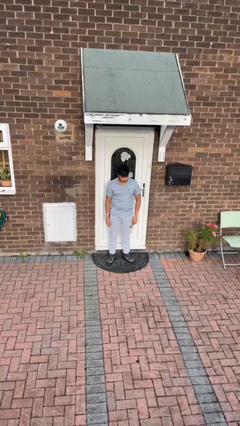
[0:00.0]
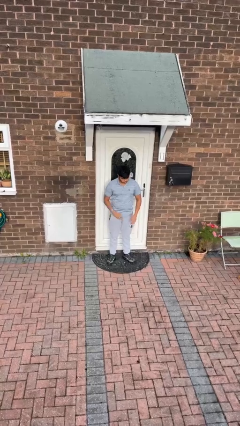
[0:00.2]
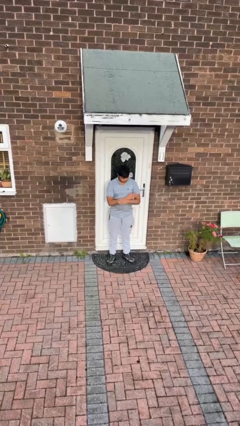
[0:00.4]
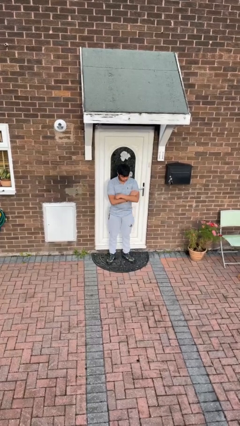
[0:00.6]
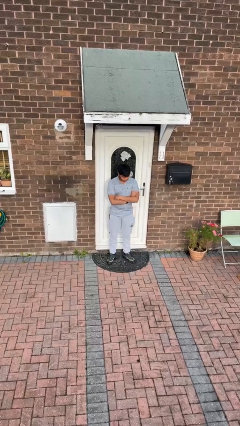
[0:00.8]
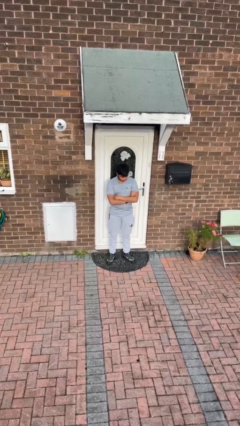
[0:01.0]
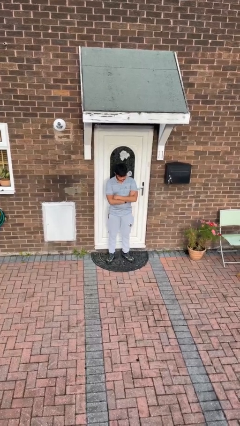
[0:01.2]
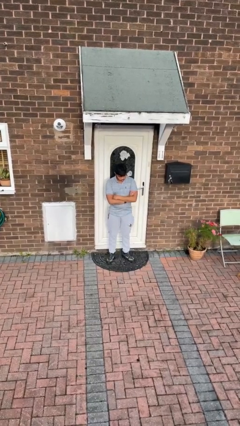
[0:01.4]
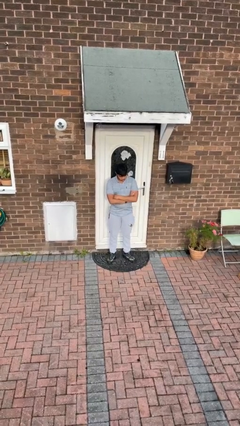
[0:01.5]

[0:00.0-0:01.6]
person crosses arms

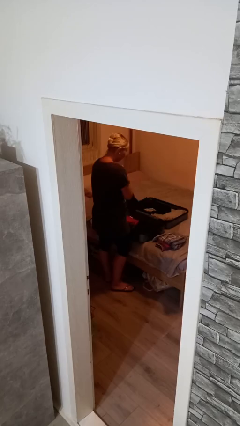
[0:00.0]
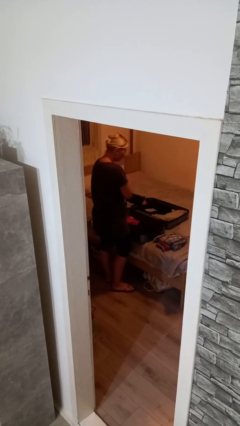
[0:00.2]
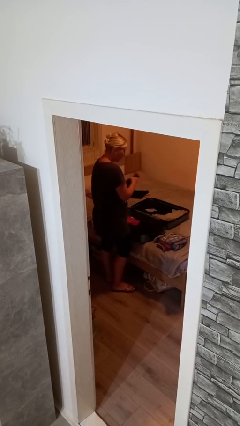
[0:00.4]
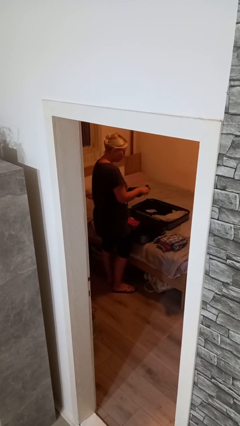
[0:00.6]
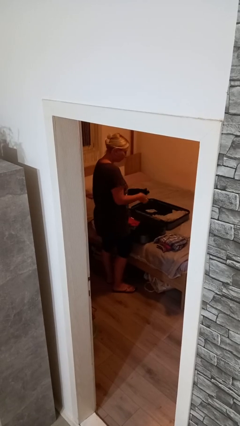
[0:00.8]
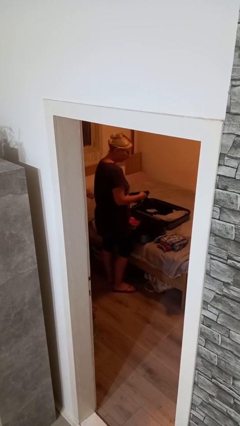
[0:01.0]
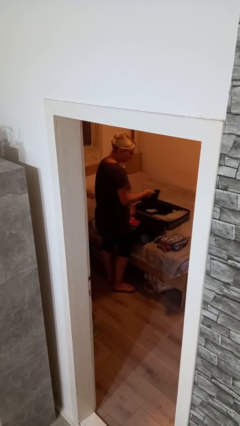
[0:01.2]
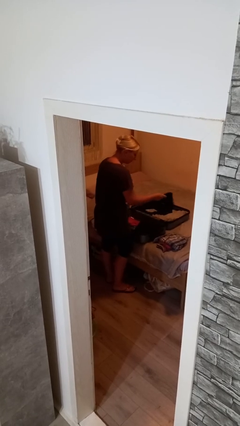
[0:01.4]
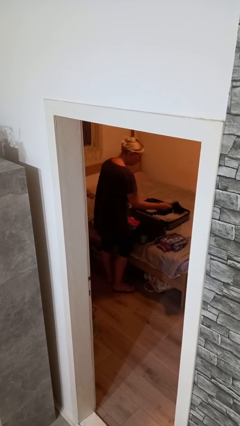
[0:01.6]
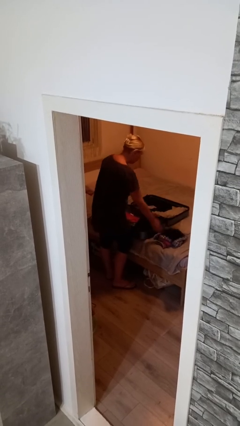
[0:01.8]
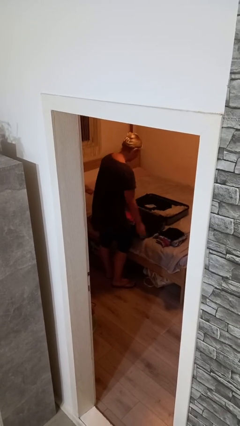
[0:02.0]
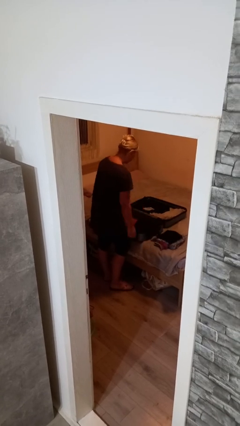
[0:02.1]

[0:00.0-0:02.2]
person unloads clothes from suitcase

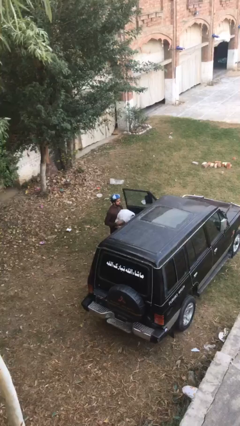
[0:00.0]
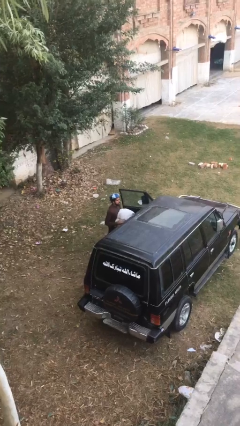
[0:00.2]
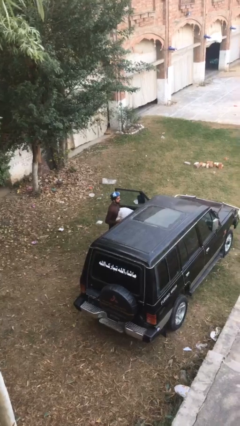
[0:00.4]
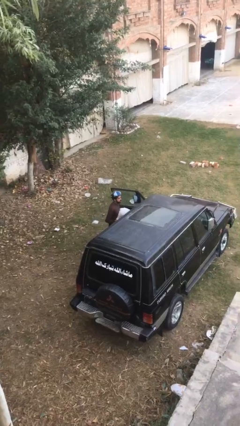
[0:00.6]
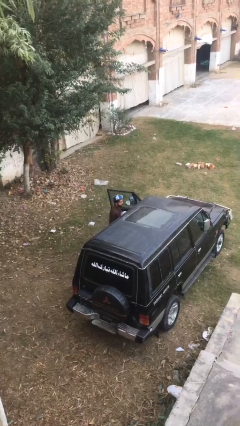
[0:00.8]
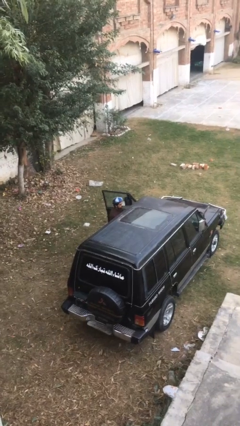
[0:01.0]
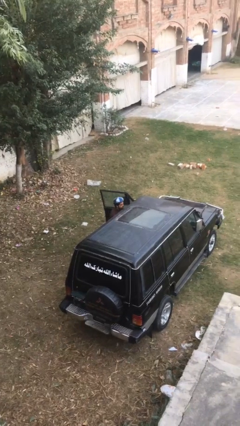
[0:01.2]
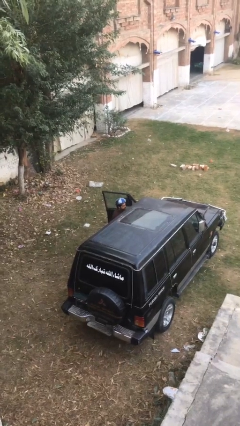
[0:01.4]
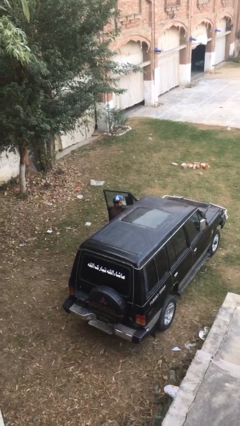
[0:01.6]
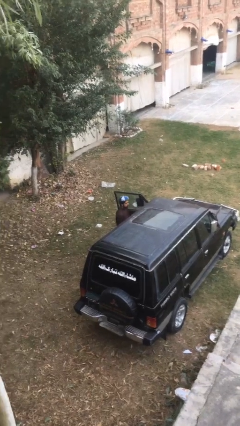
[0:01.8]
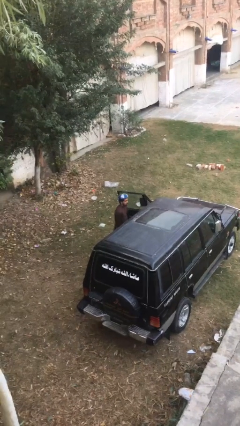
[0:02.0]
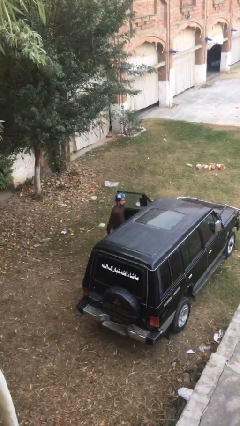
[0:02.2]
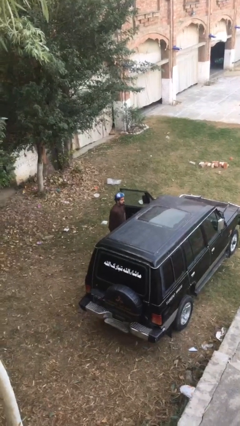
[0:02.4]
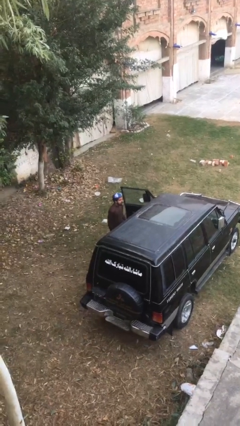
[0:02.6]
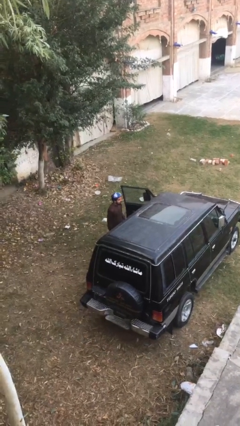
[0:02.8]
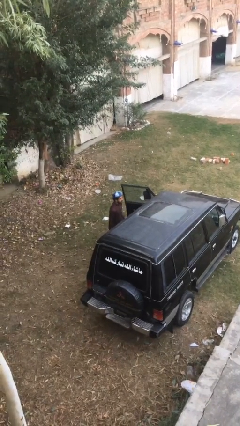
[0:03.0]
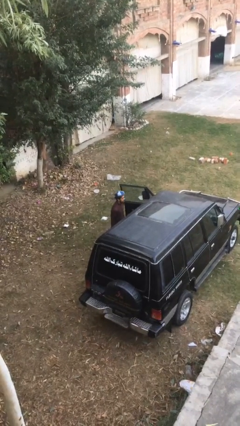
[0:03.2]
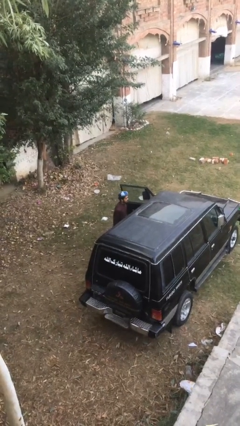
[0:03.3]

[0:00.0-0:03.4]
person loads car

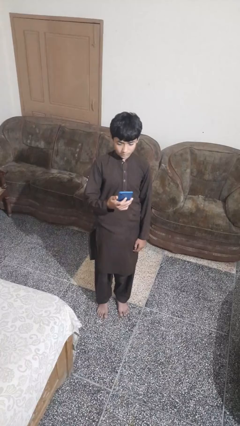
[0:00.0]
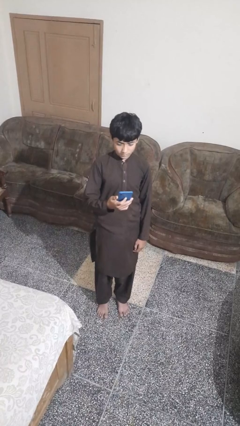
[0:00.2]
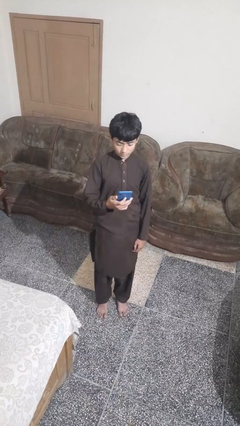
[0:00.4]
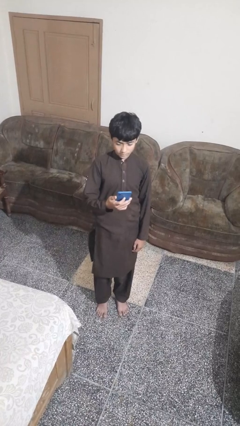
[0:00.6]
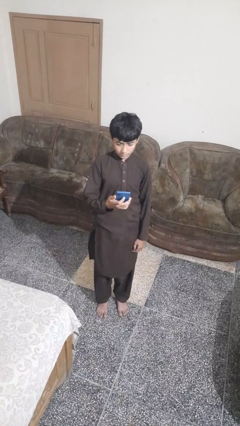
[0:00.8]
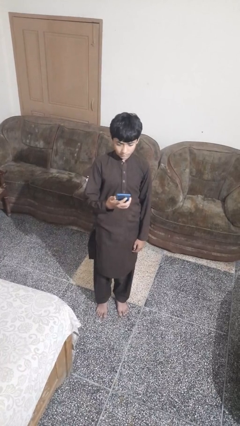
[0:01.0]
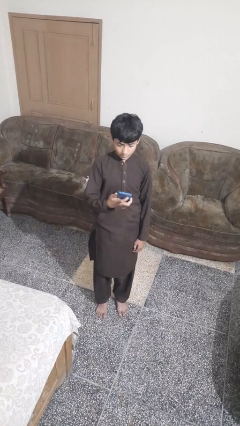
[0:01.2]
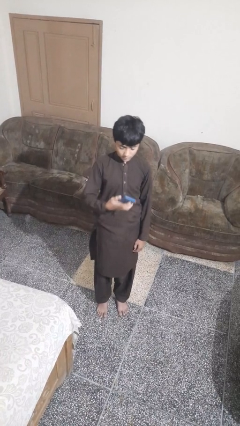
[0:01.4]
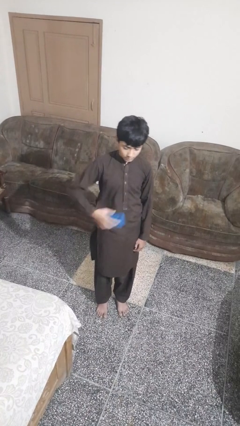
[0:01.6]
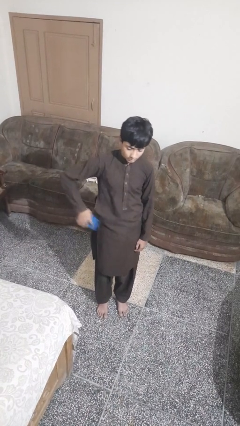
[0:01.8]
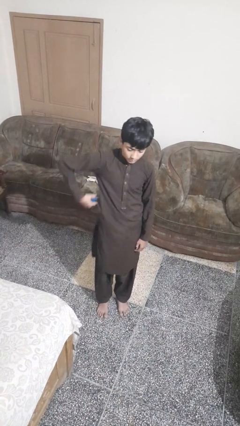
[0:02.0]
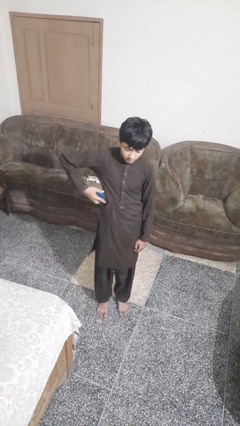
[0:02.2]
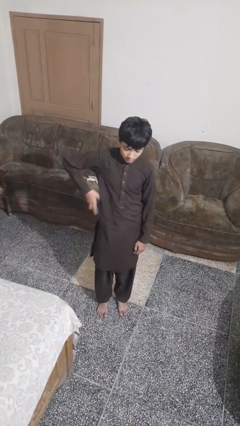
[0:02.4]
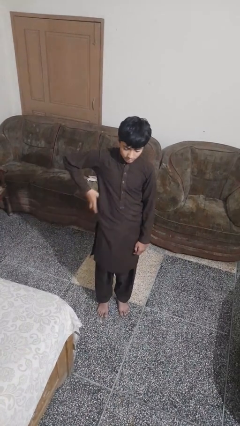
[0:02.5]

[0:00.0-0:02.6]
person puts phone into pocket

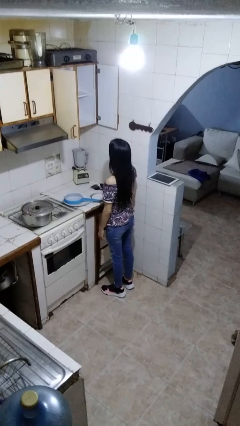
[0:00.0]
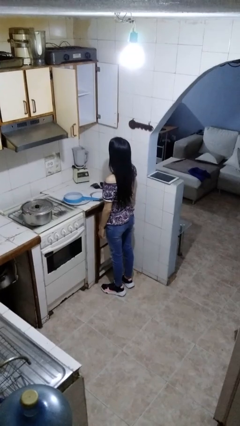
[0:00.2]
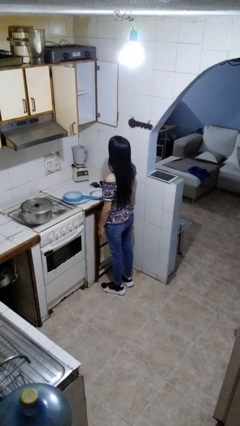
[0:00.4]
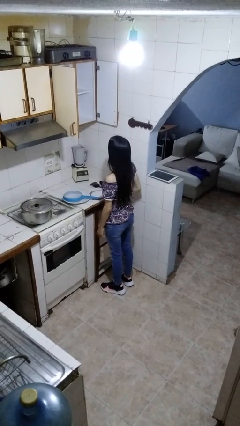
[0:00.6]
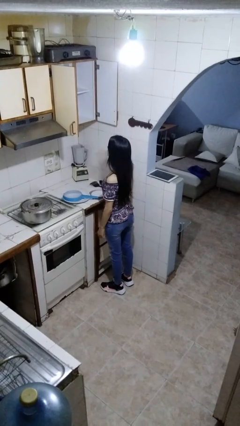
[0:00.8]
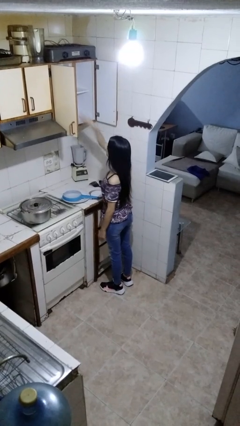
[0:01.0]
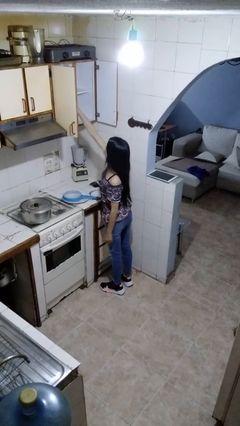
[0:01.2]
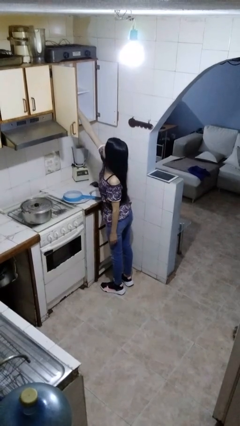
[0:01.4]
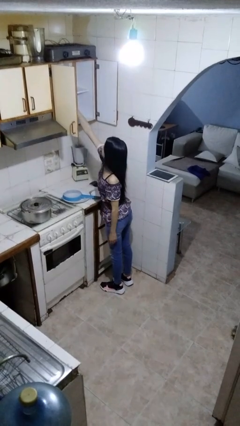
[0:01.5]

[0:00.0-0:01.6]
person takes object from cabinet

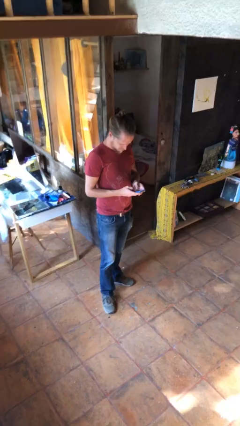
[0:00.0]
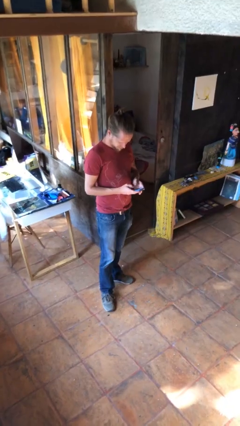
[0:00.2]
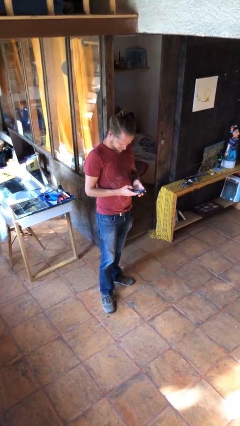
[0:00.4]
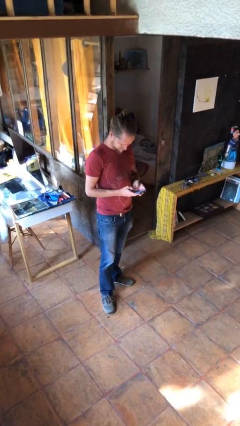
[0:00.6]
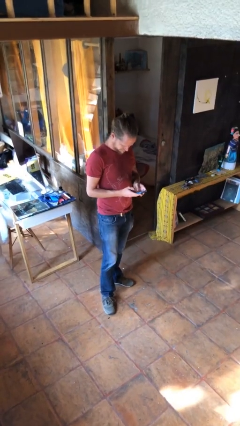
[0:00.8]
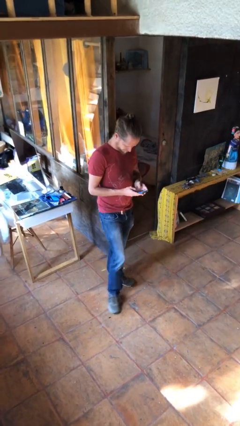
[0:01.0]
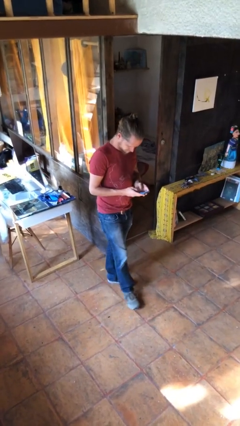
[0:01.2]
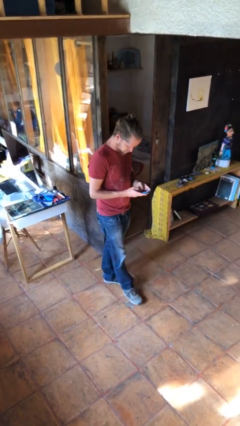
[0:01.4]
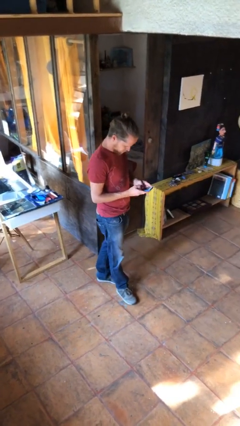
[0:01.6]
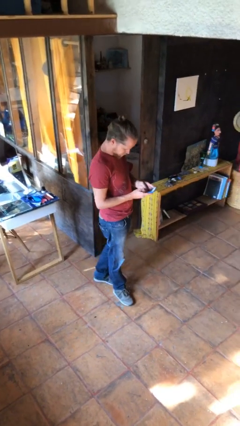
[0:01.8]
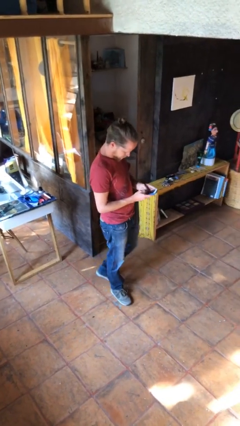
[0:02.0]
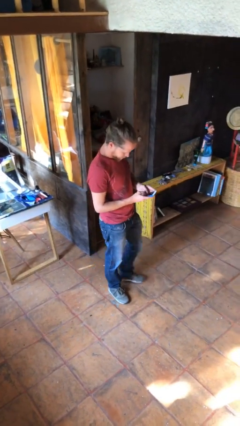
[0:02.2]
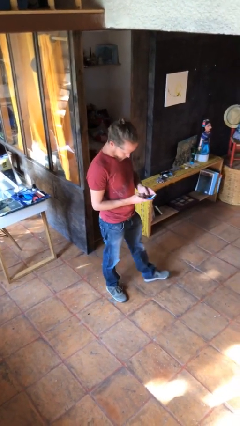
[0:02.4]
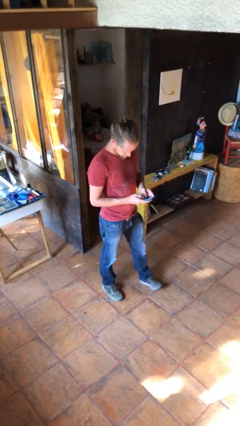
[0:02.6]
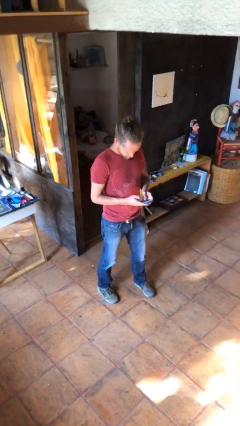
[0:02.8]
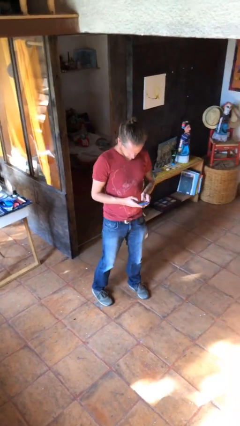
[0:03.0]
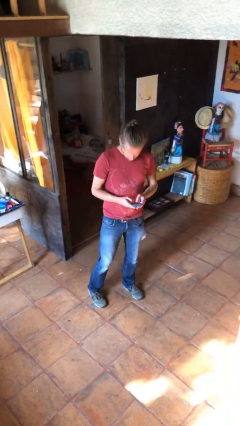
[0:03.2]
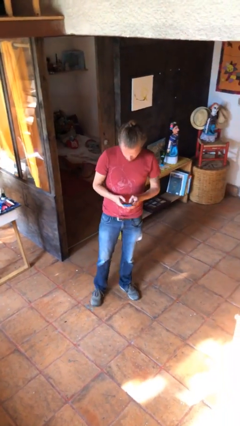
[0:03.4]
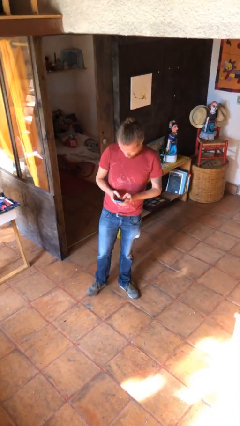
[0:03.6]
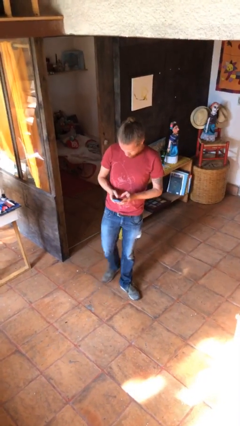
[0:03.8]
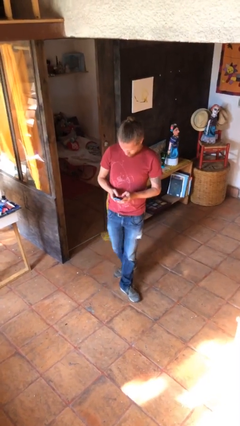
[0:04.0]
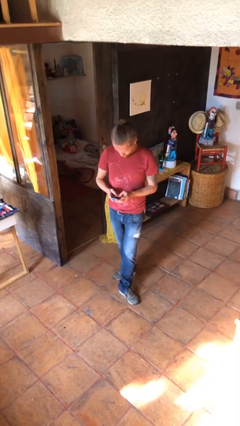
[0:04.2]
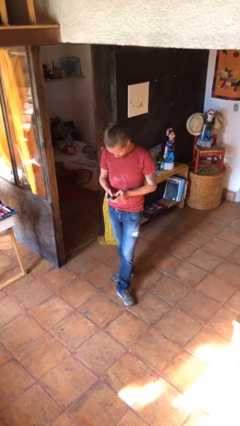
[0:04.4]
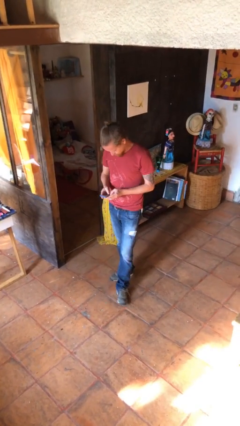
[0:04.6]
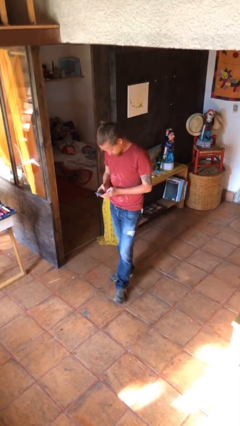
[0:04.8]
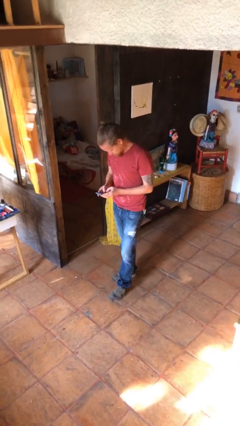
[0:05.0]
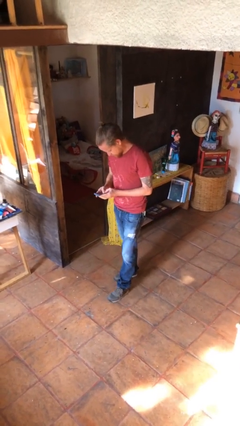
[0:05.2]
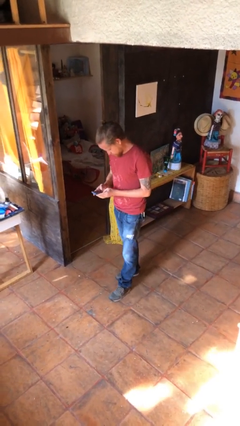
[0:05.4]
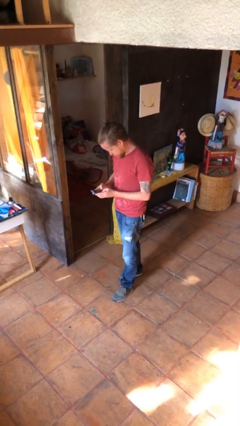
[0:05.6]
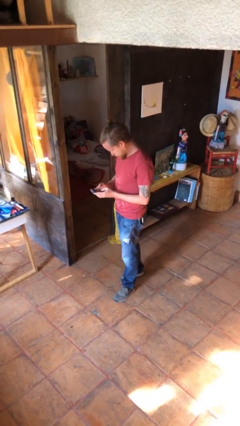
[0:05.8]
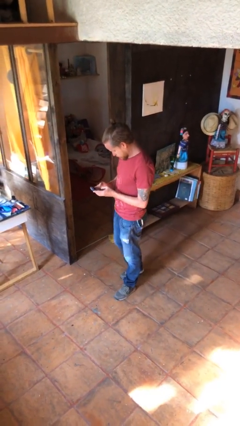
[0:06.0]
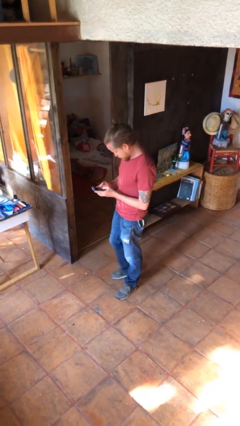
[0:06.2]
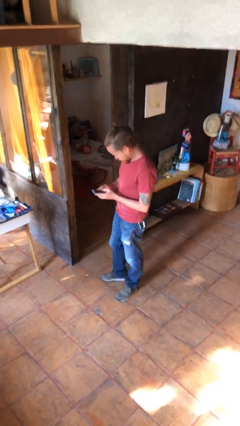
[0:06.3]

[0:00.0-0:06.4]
person texts on phone

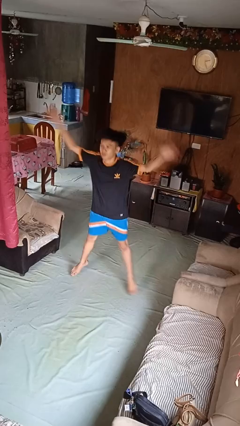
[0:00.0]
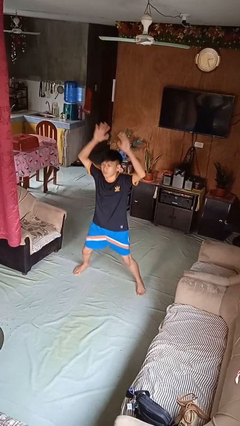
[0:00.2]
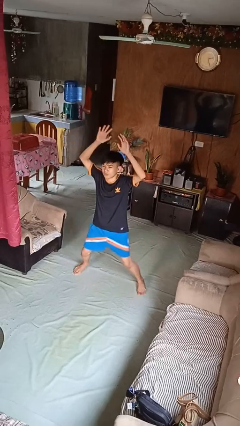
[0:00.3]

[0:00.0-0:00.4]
person exercises with jumping jacks
